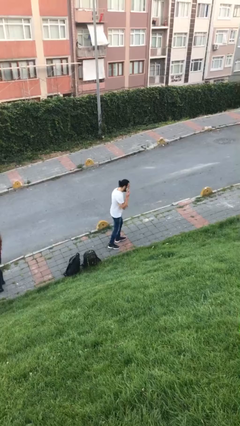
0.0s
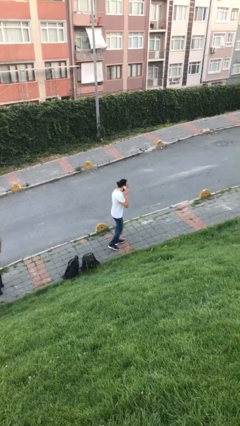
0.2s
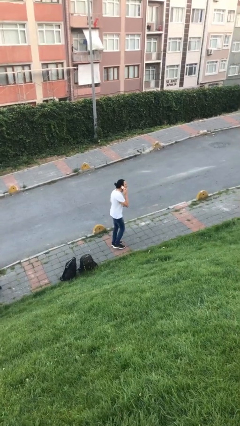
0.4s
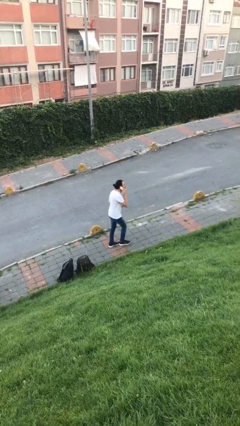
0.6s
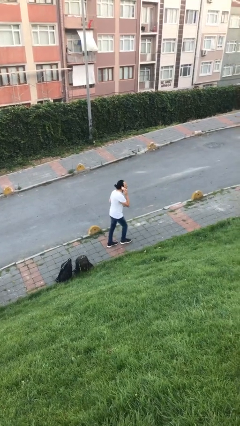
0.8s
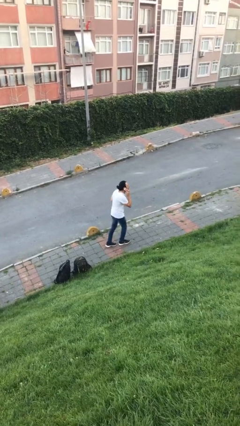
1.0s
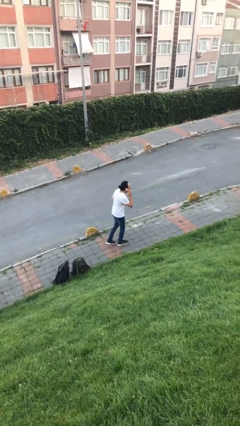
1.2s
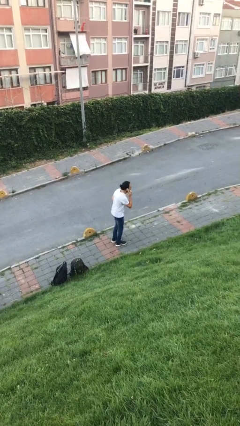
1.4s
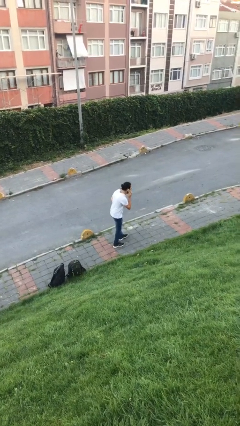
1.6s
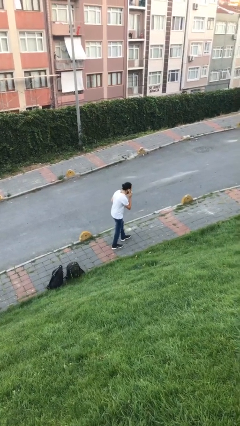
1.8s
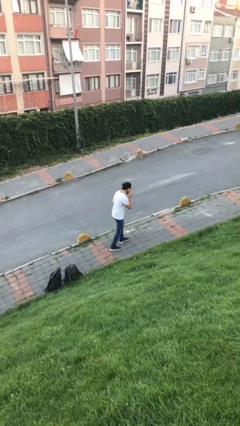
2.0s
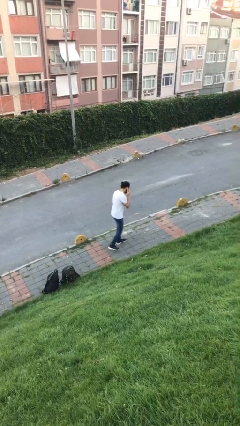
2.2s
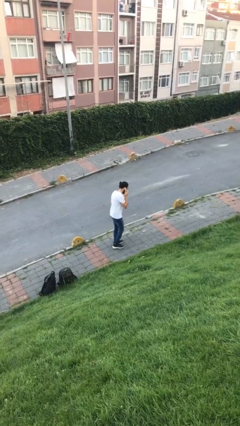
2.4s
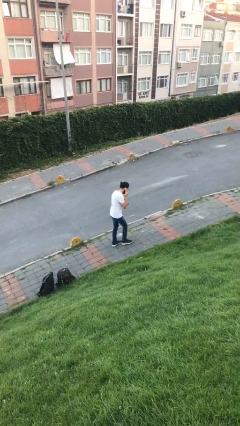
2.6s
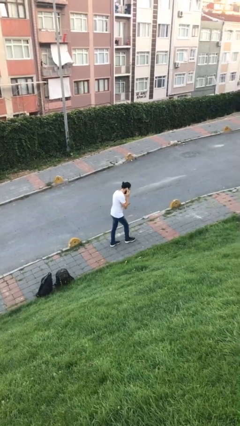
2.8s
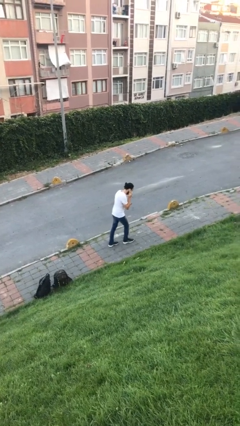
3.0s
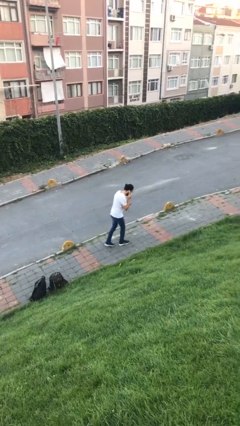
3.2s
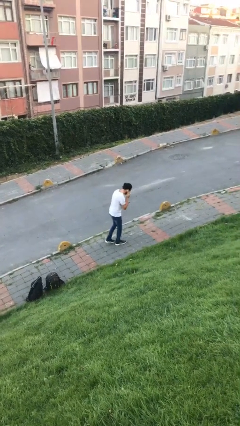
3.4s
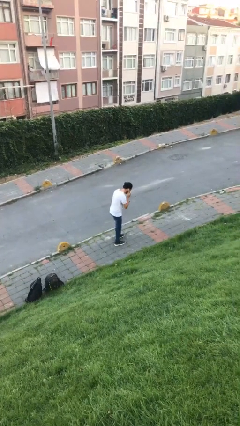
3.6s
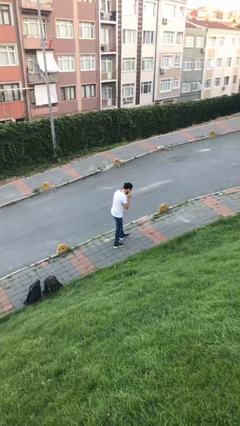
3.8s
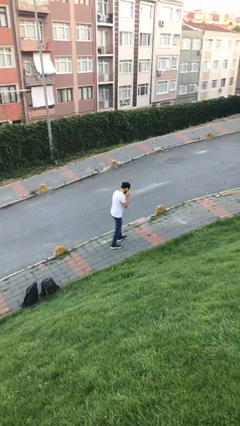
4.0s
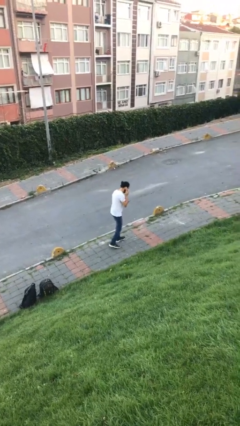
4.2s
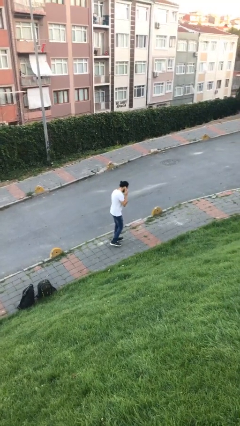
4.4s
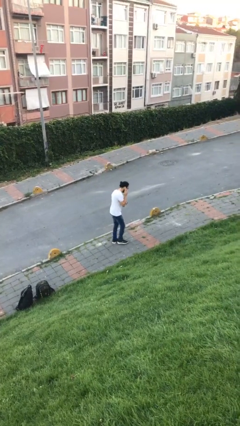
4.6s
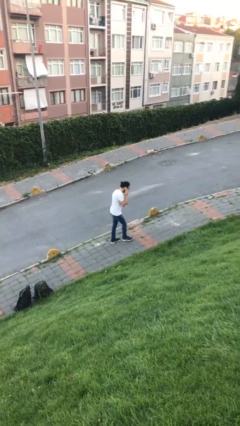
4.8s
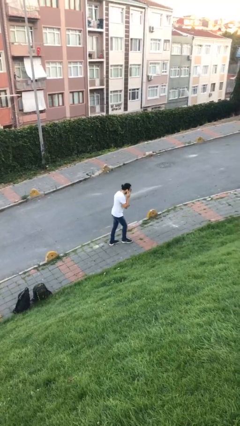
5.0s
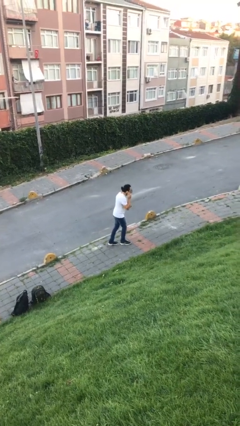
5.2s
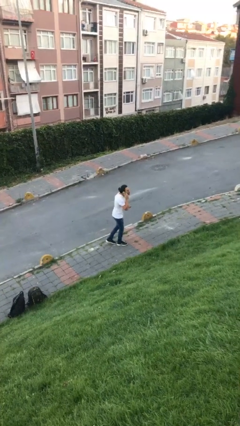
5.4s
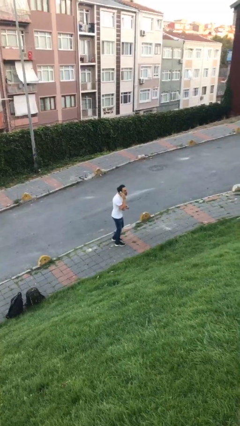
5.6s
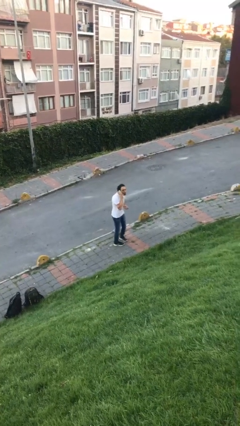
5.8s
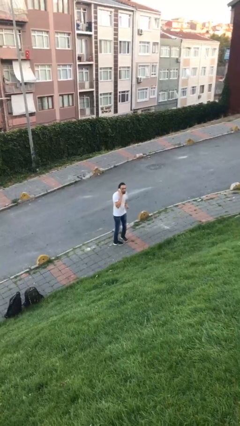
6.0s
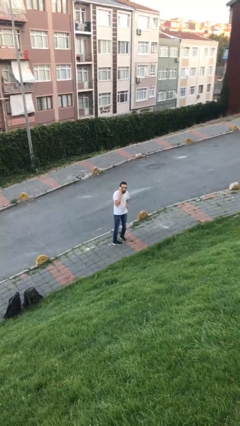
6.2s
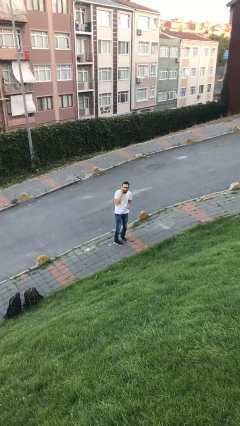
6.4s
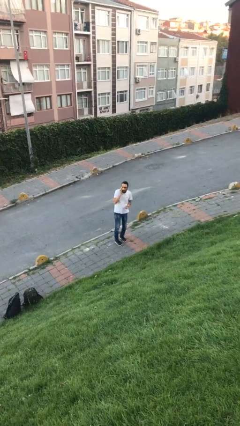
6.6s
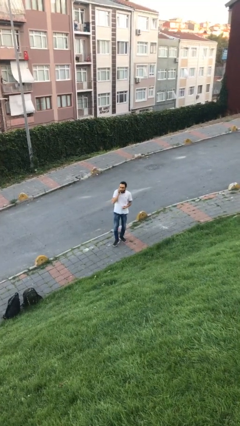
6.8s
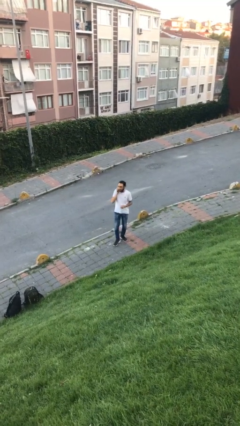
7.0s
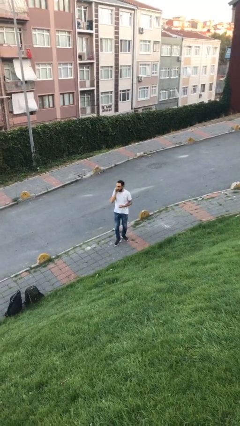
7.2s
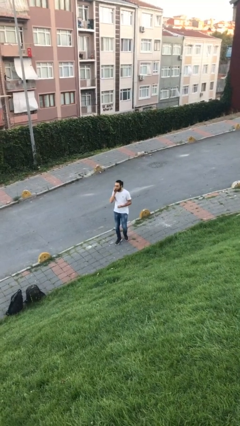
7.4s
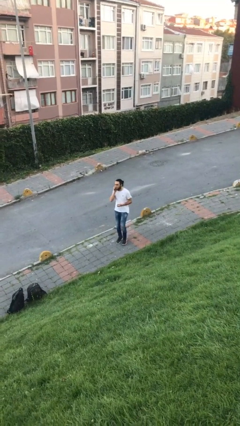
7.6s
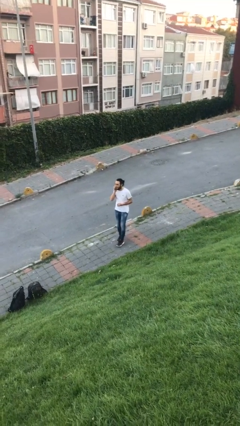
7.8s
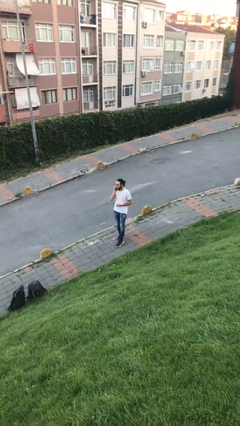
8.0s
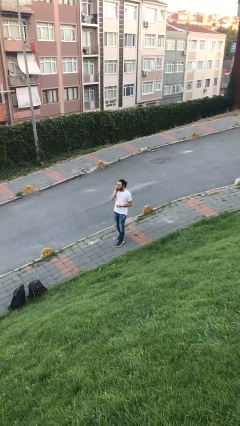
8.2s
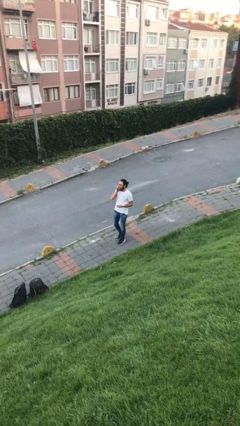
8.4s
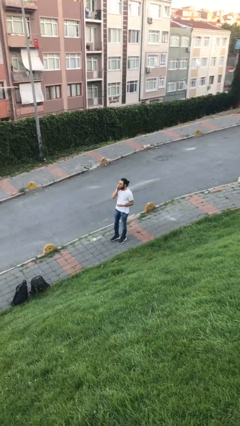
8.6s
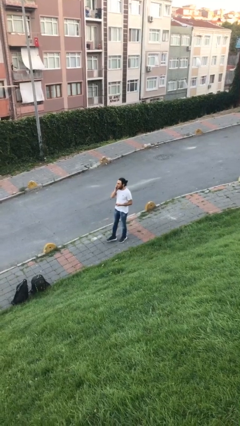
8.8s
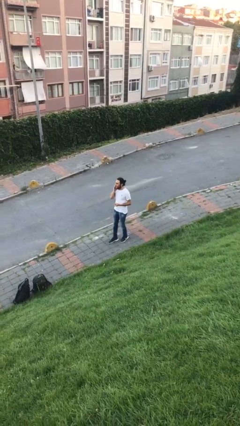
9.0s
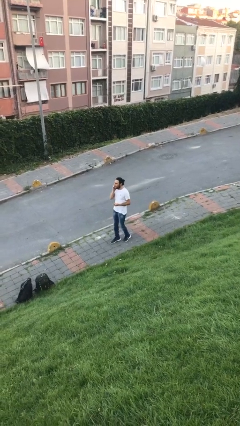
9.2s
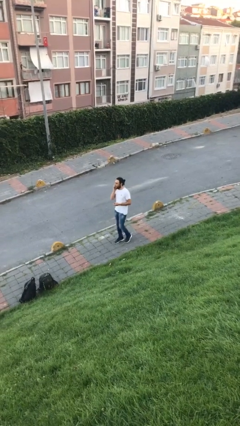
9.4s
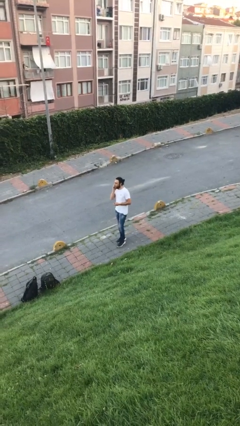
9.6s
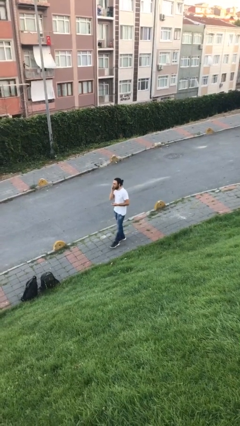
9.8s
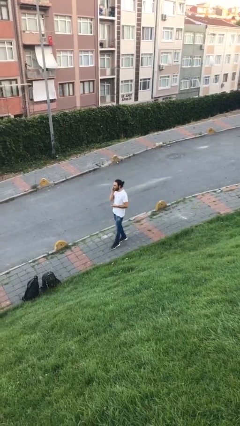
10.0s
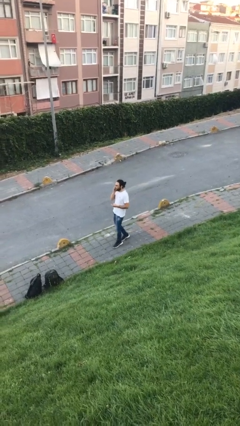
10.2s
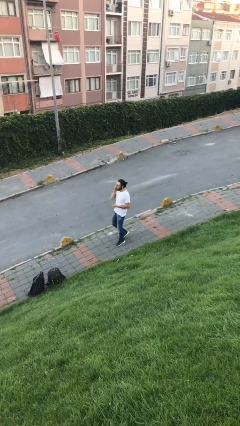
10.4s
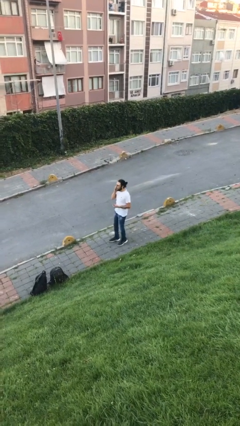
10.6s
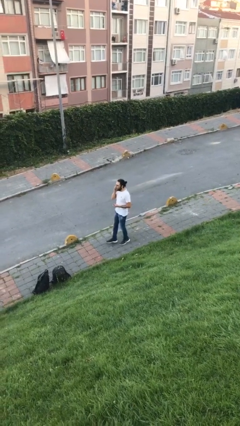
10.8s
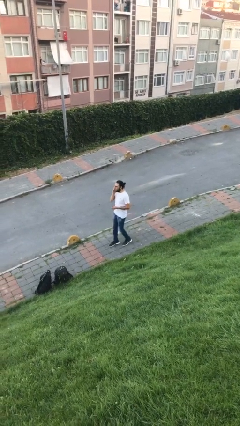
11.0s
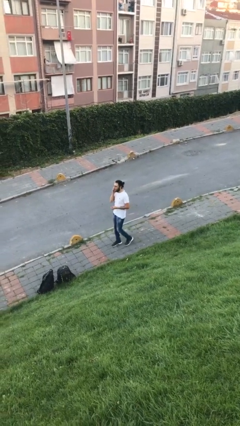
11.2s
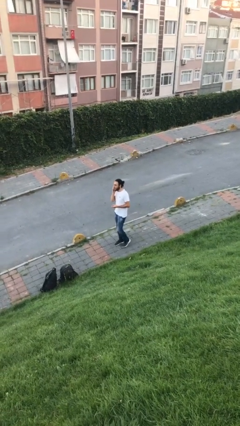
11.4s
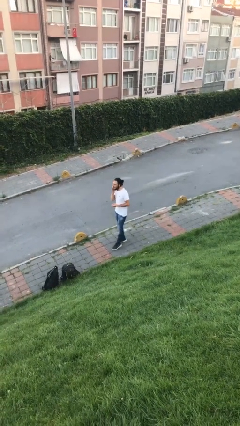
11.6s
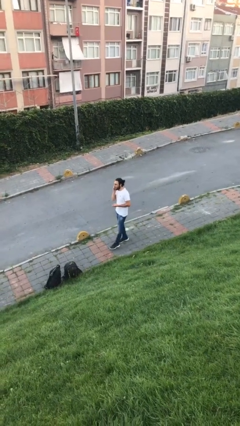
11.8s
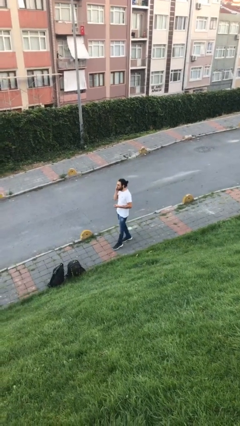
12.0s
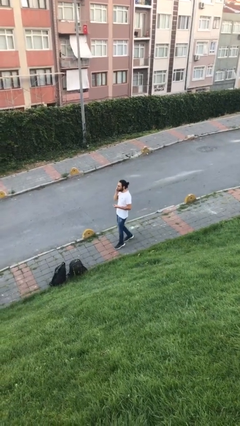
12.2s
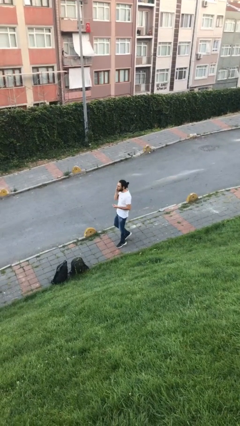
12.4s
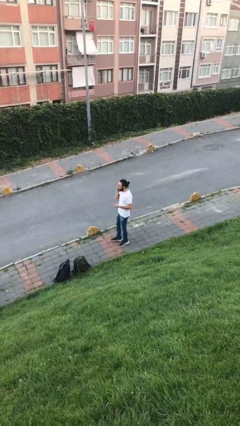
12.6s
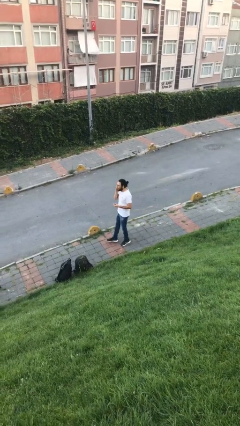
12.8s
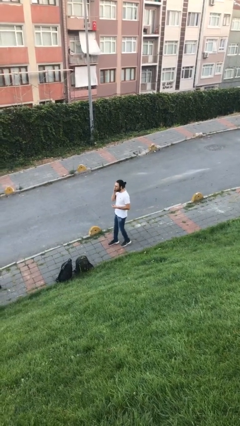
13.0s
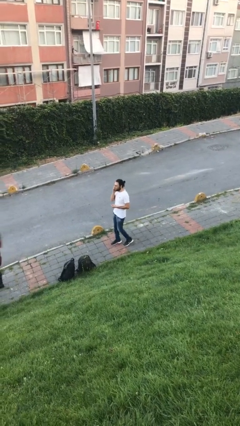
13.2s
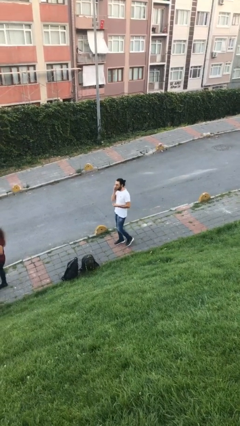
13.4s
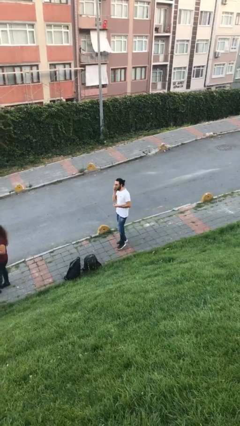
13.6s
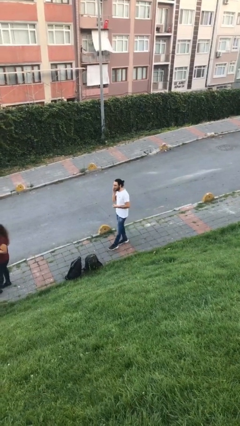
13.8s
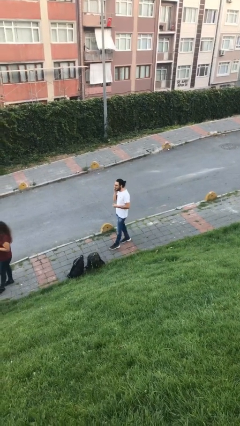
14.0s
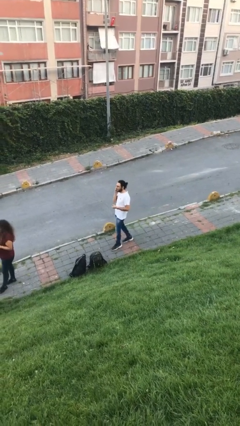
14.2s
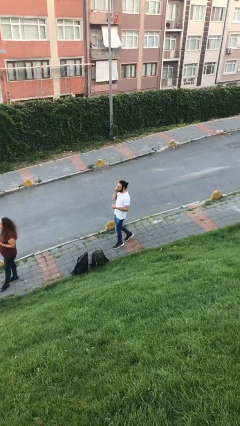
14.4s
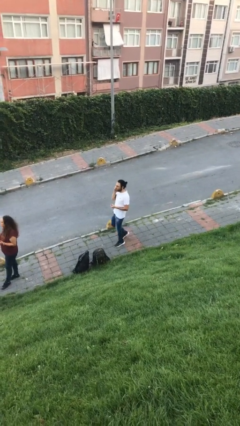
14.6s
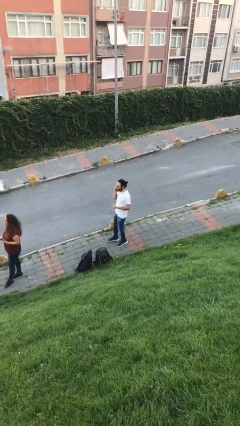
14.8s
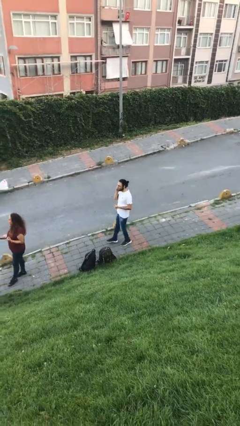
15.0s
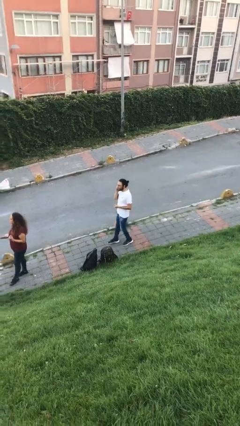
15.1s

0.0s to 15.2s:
person talks on phone

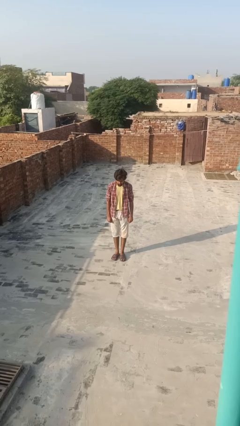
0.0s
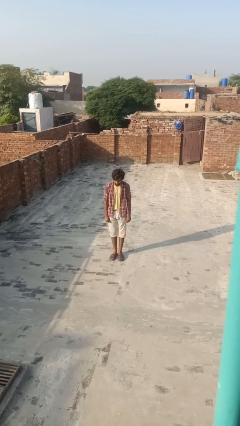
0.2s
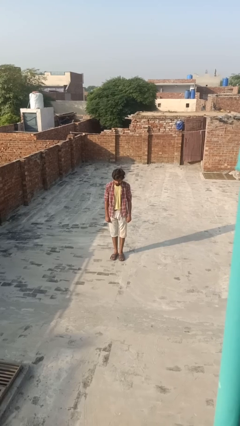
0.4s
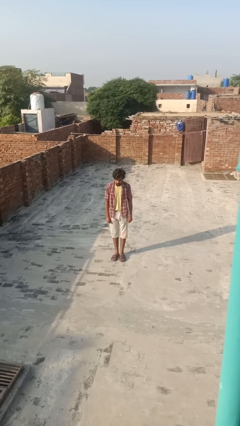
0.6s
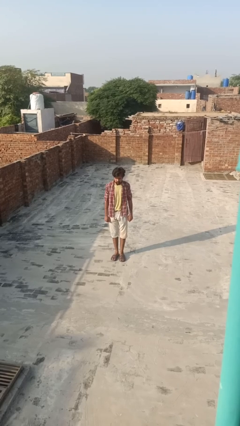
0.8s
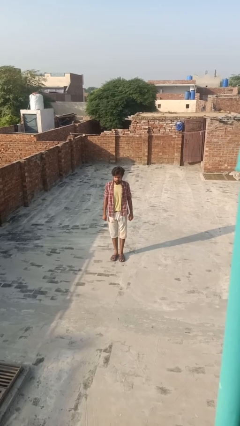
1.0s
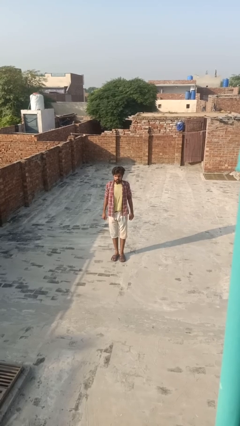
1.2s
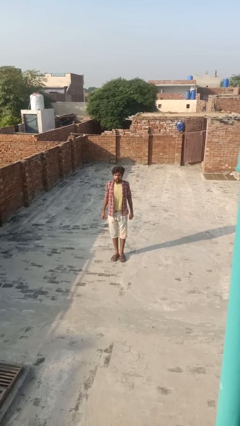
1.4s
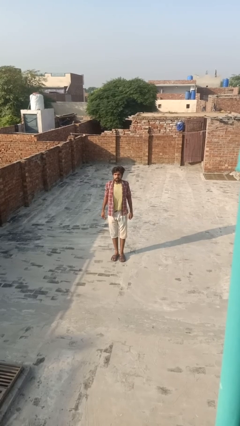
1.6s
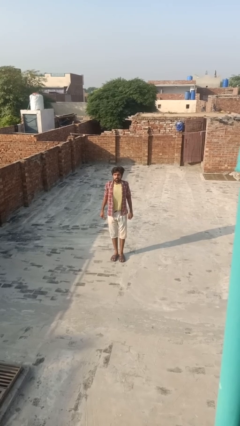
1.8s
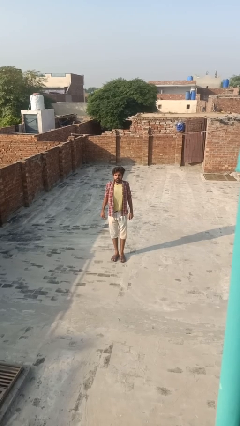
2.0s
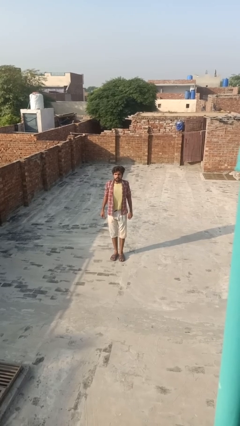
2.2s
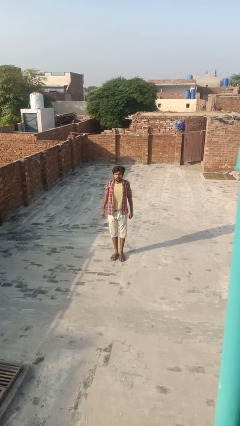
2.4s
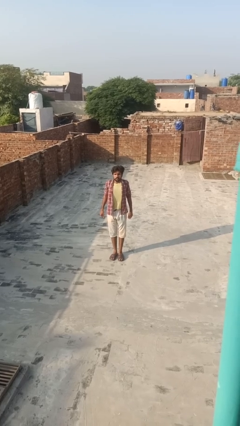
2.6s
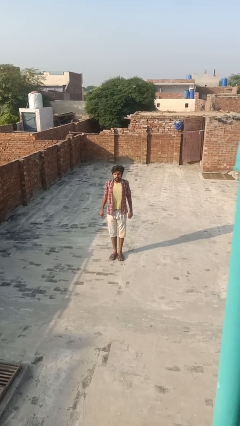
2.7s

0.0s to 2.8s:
person exercises with lunges

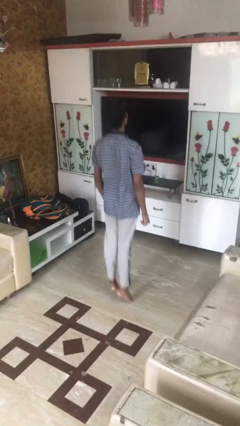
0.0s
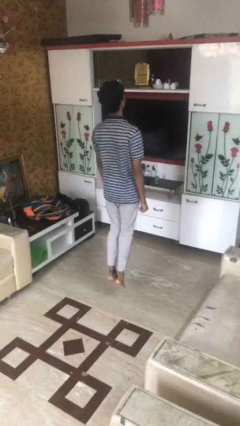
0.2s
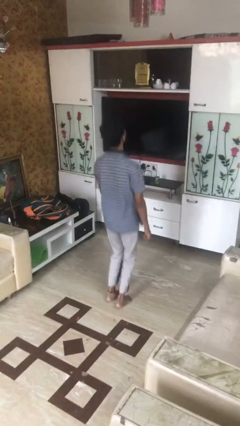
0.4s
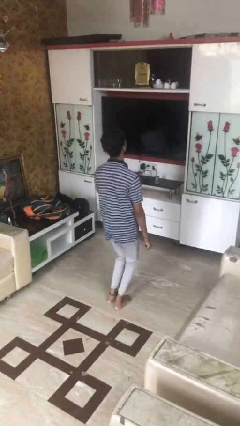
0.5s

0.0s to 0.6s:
person jumps
